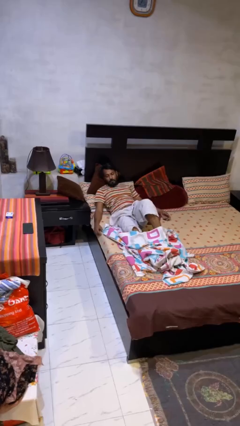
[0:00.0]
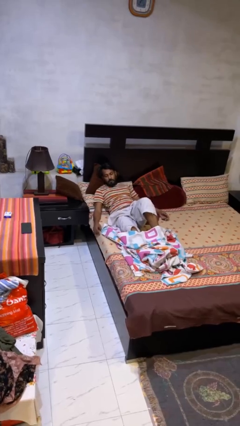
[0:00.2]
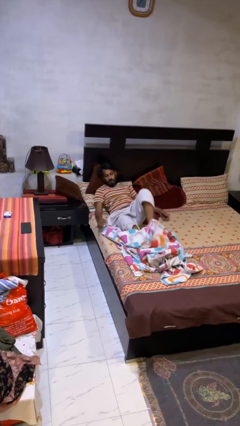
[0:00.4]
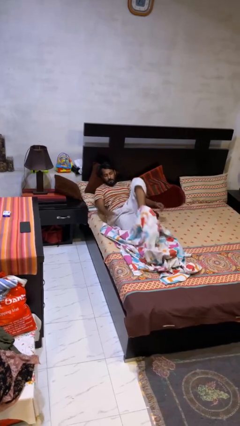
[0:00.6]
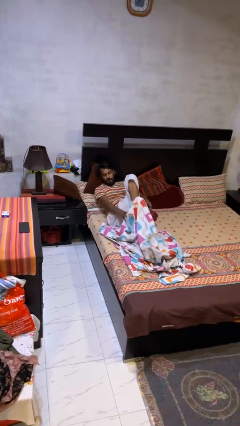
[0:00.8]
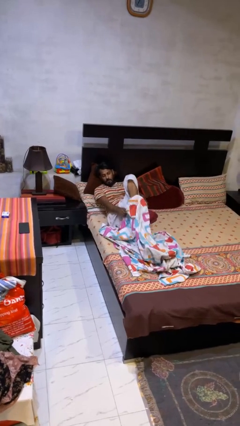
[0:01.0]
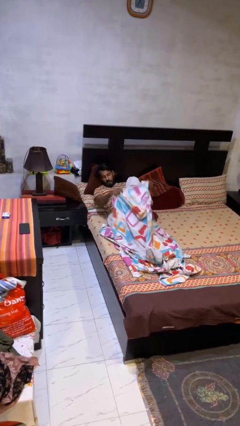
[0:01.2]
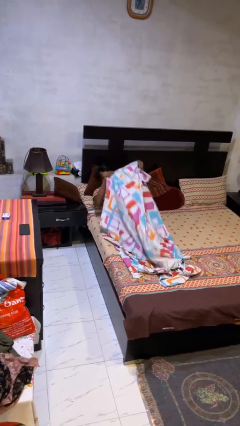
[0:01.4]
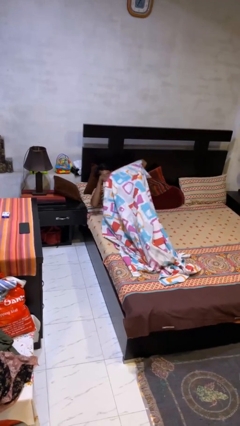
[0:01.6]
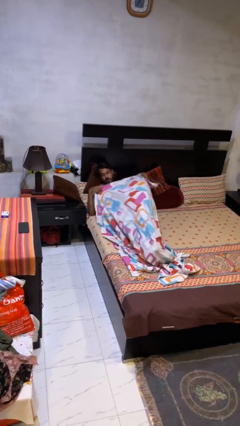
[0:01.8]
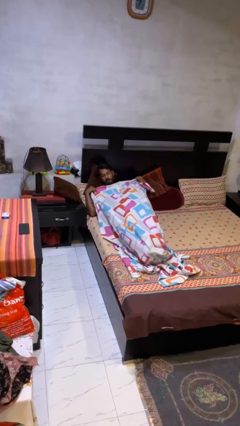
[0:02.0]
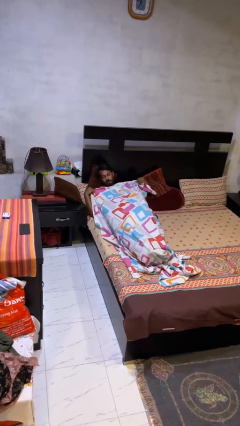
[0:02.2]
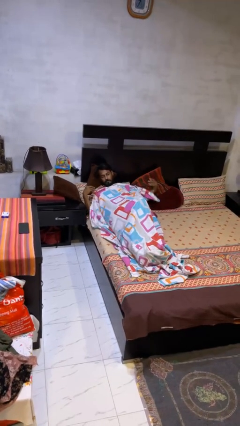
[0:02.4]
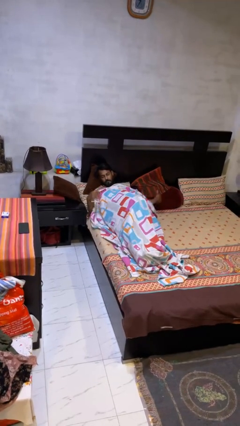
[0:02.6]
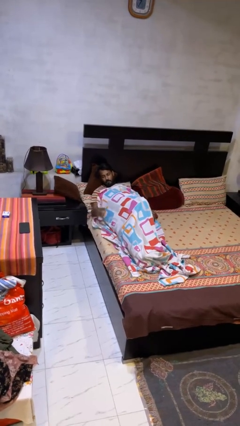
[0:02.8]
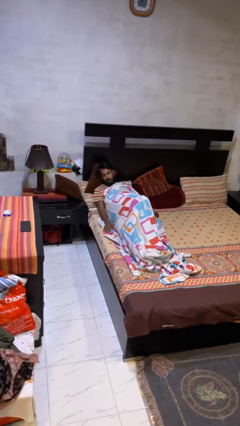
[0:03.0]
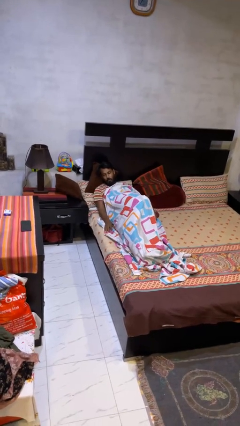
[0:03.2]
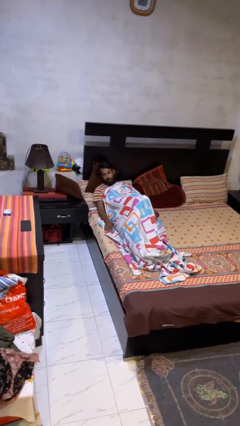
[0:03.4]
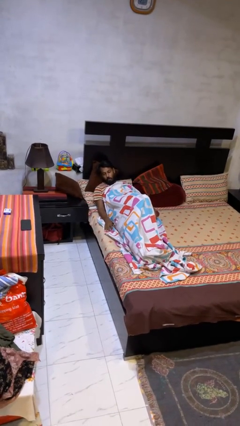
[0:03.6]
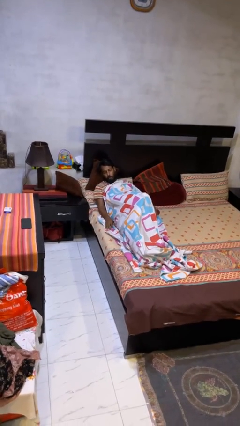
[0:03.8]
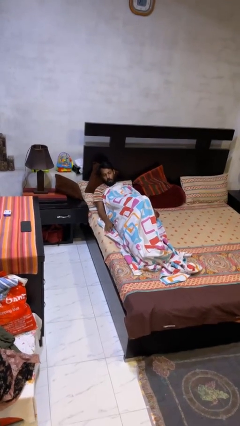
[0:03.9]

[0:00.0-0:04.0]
person covers with bedsheets

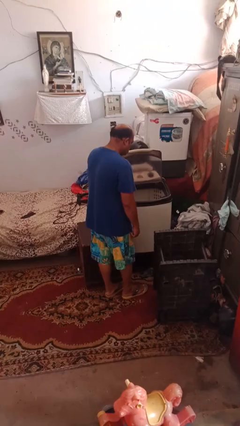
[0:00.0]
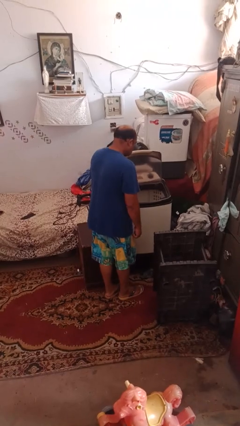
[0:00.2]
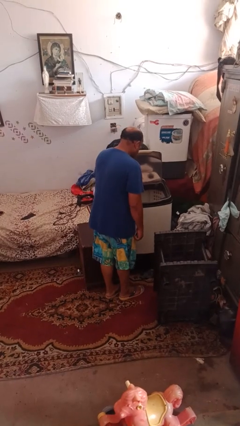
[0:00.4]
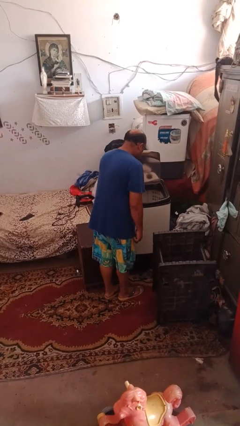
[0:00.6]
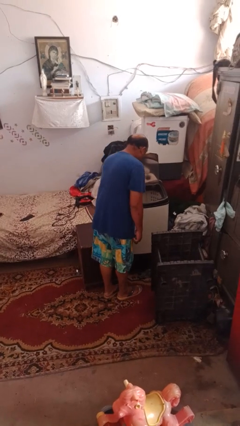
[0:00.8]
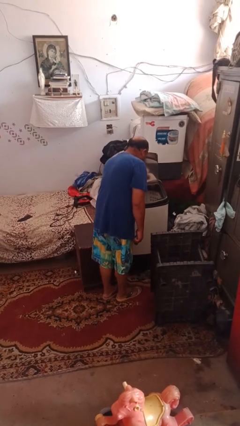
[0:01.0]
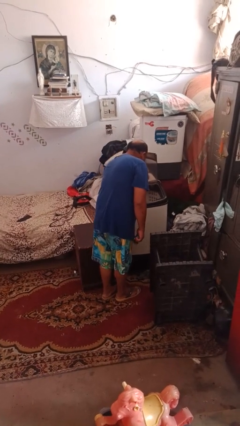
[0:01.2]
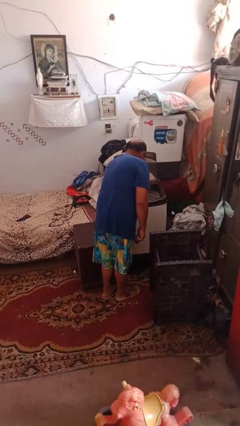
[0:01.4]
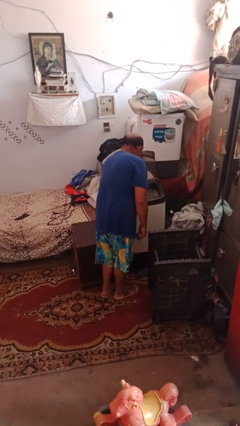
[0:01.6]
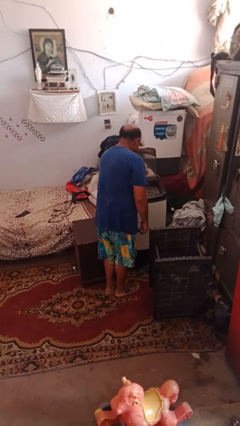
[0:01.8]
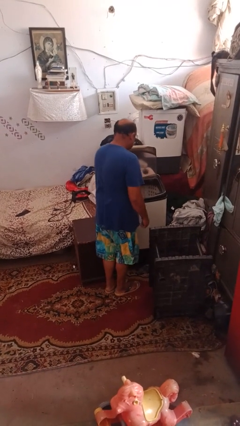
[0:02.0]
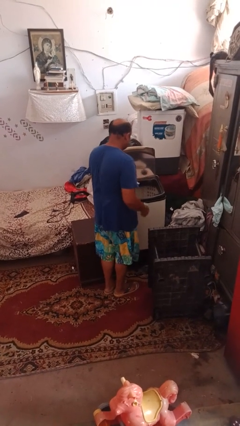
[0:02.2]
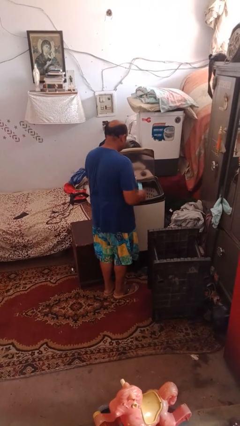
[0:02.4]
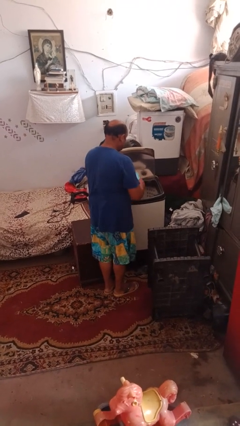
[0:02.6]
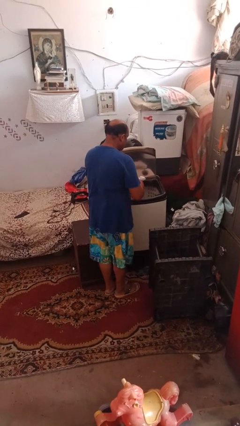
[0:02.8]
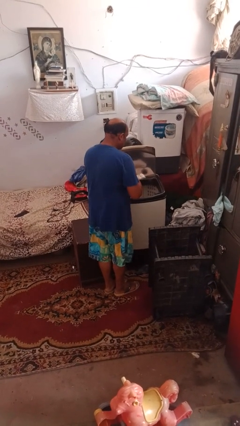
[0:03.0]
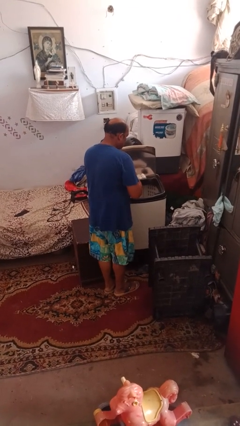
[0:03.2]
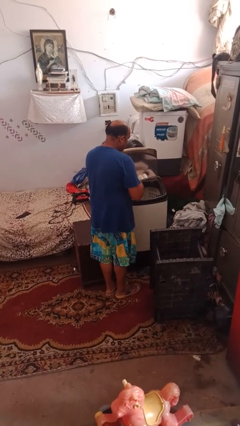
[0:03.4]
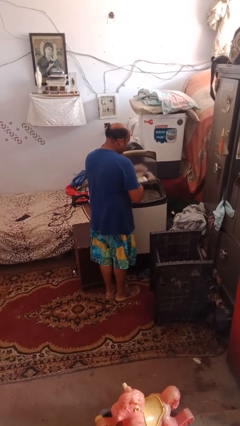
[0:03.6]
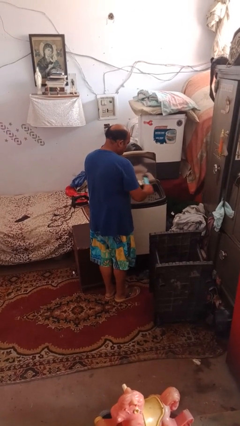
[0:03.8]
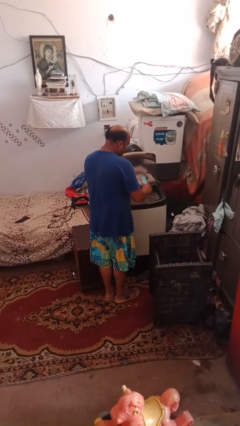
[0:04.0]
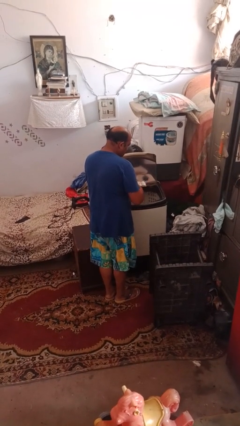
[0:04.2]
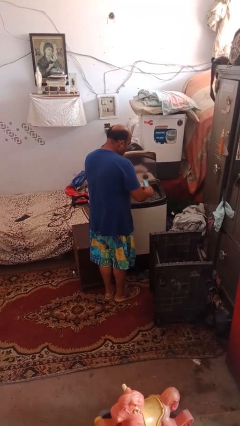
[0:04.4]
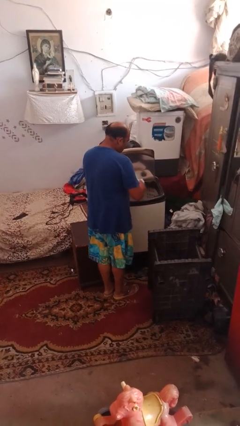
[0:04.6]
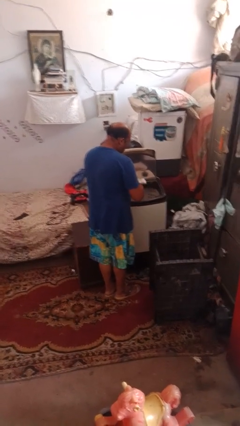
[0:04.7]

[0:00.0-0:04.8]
person cleans dryer lint trap

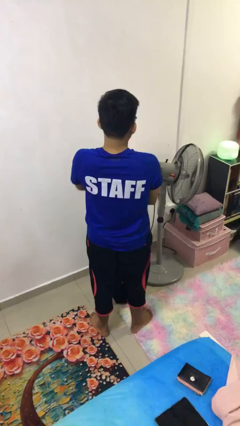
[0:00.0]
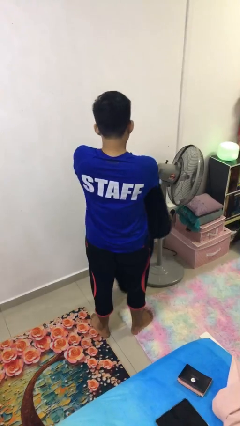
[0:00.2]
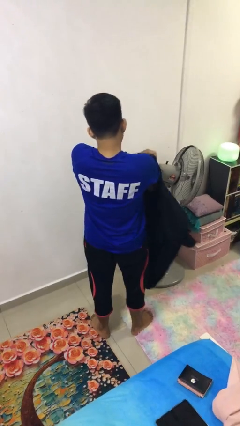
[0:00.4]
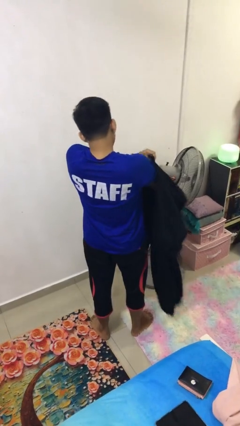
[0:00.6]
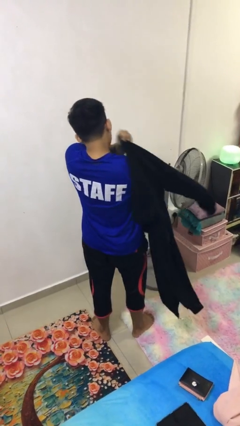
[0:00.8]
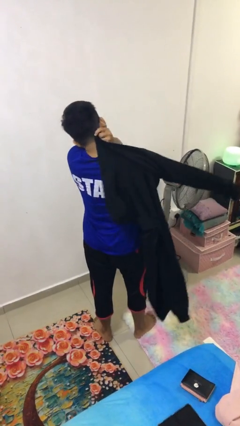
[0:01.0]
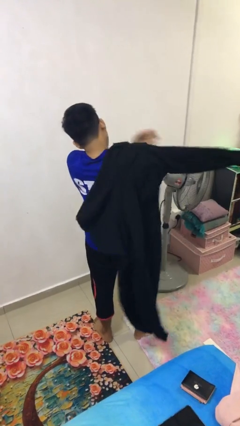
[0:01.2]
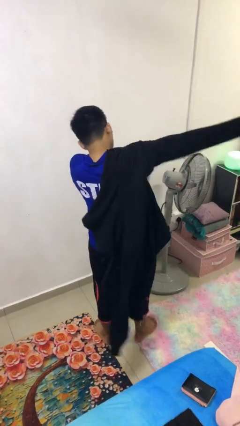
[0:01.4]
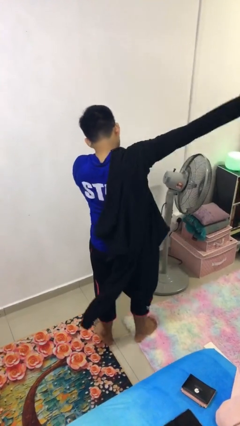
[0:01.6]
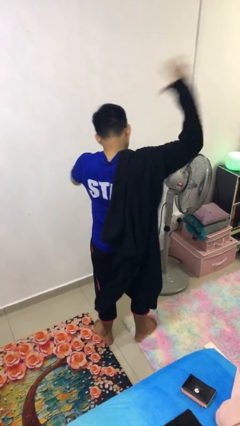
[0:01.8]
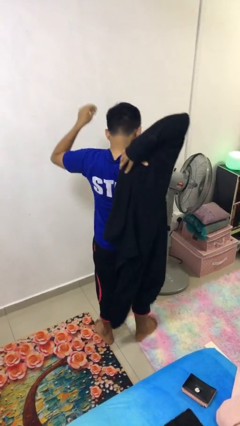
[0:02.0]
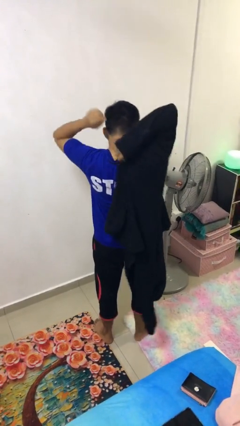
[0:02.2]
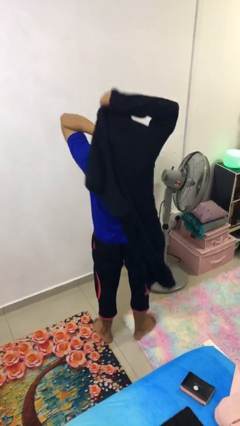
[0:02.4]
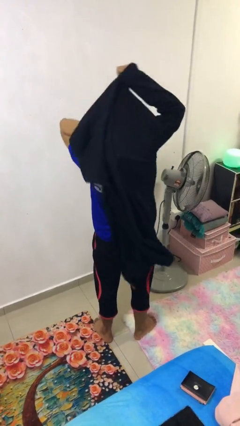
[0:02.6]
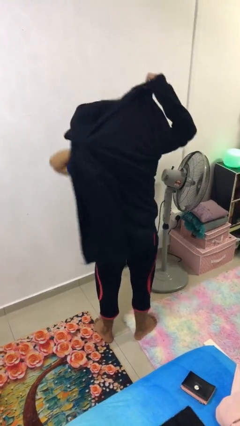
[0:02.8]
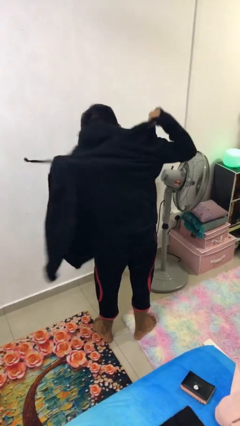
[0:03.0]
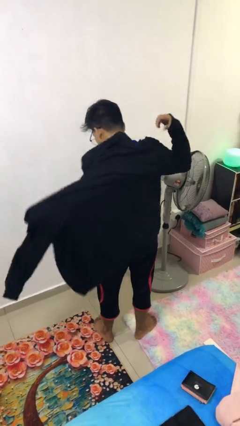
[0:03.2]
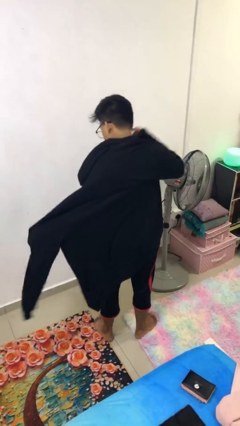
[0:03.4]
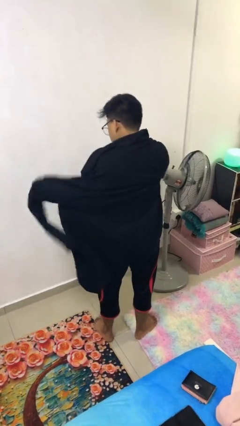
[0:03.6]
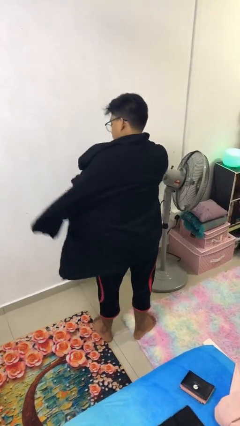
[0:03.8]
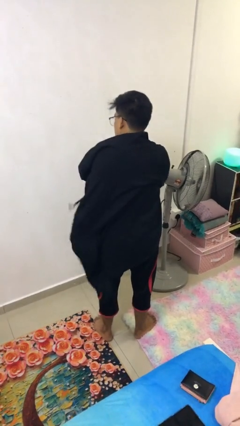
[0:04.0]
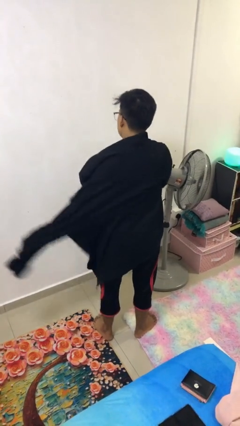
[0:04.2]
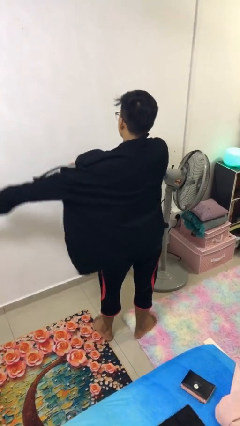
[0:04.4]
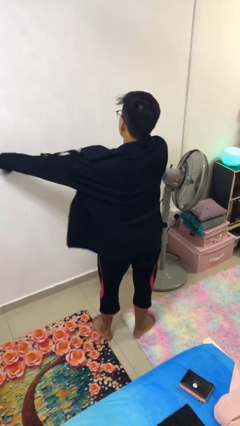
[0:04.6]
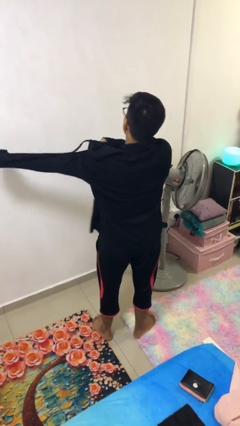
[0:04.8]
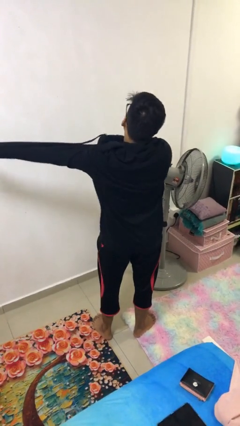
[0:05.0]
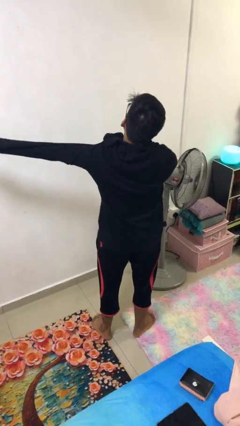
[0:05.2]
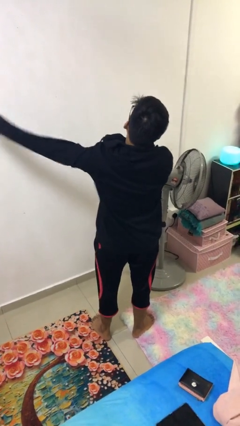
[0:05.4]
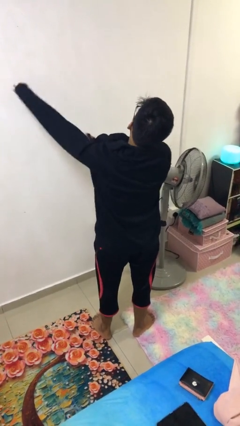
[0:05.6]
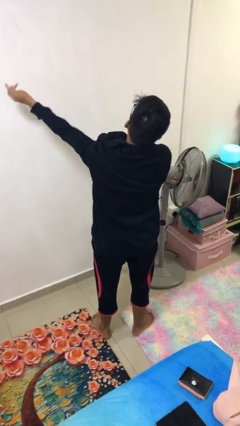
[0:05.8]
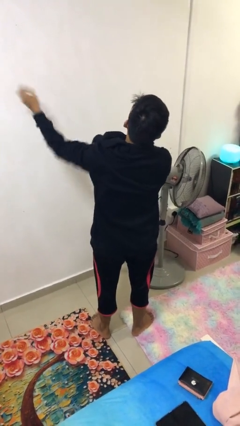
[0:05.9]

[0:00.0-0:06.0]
person puts on jacket

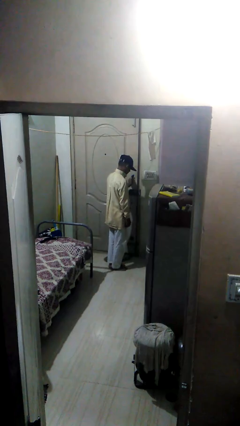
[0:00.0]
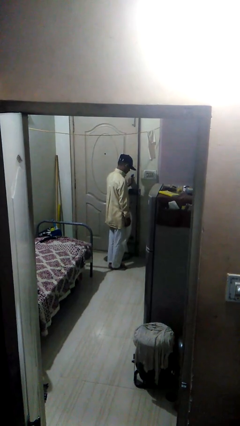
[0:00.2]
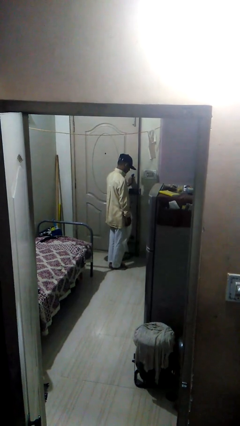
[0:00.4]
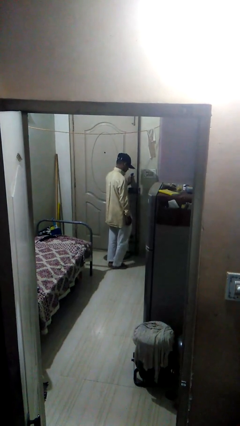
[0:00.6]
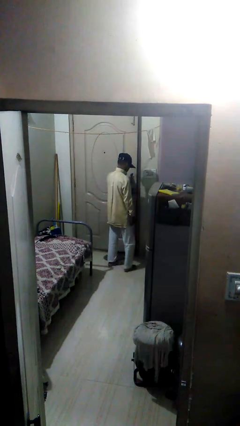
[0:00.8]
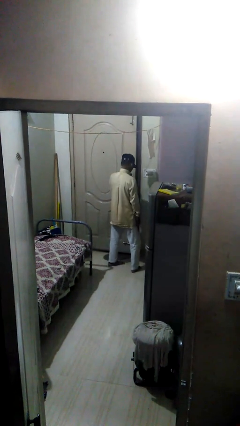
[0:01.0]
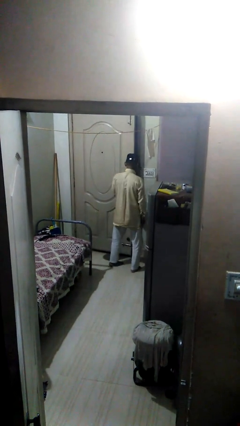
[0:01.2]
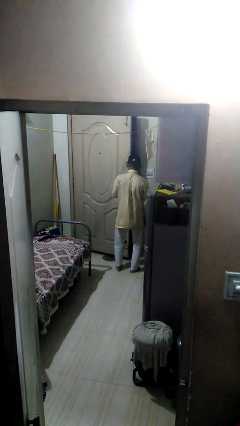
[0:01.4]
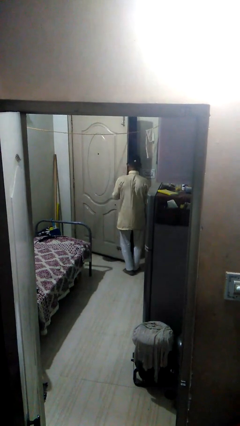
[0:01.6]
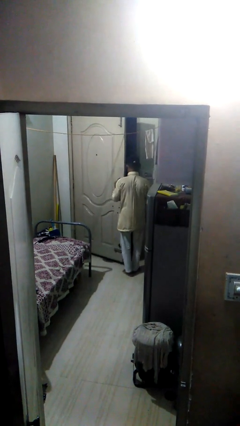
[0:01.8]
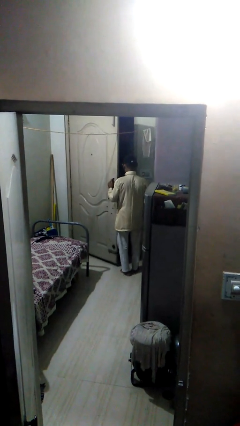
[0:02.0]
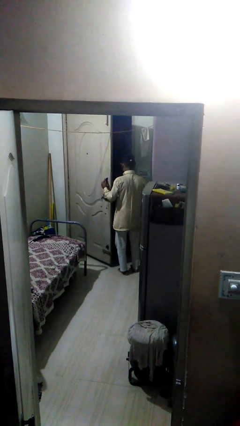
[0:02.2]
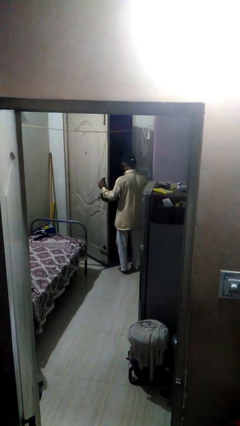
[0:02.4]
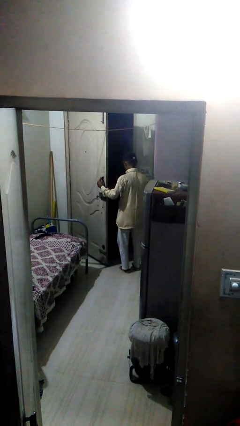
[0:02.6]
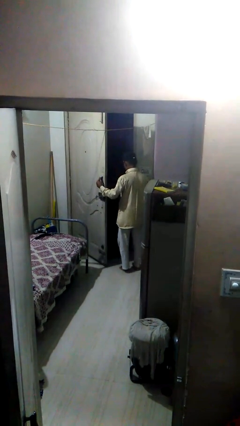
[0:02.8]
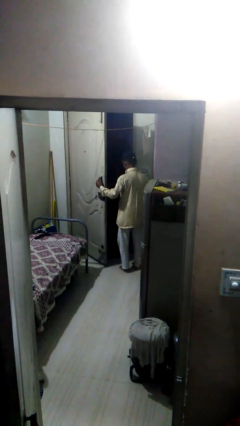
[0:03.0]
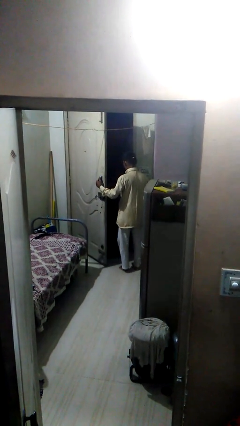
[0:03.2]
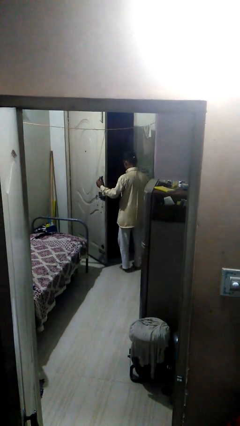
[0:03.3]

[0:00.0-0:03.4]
person opens facility door
